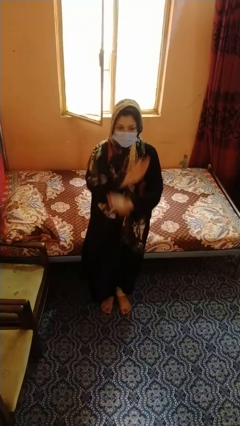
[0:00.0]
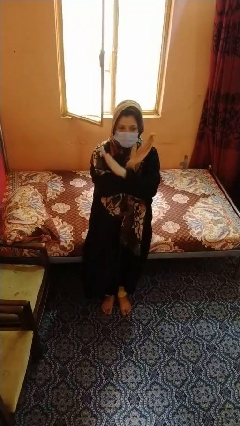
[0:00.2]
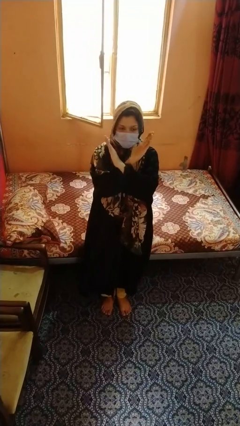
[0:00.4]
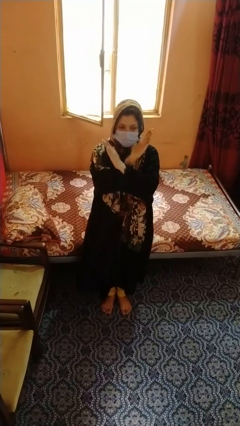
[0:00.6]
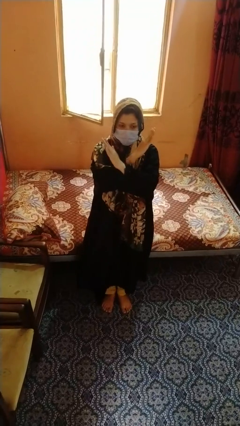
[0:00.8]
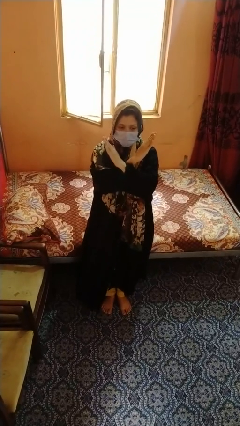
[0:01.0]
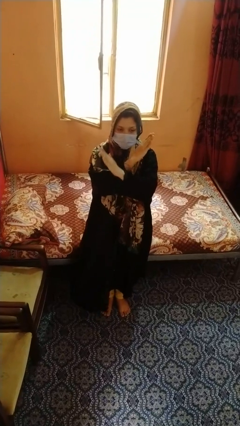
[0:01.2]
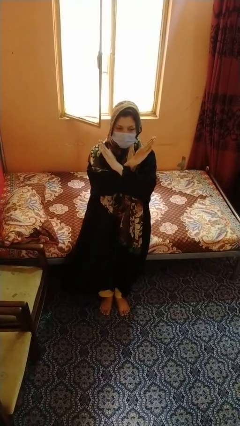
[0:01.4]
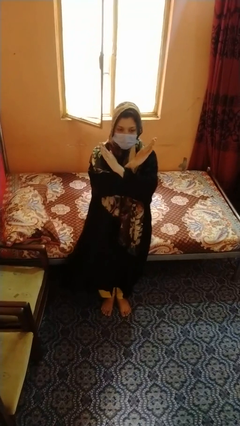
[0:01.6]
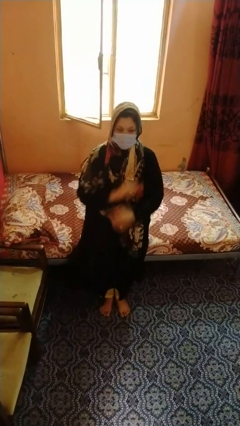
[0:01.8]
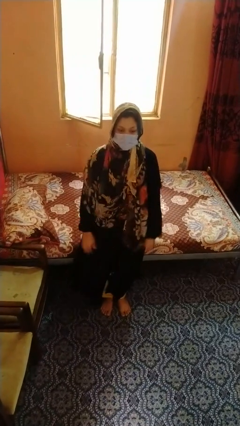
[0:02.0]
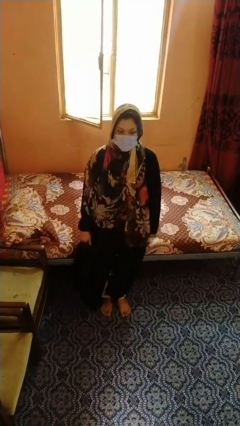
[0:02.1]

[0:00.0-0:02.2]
person gestures arms x

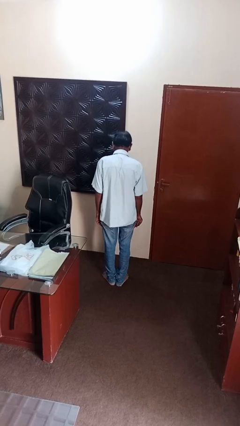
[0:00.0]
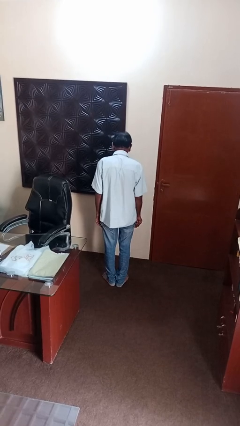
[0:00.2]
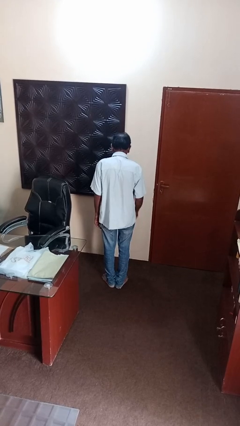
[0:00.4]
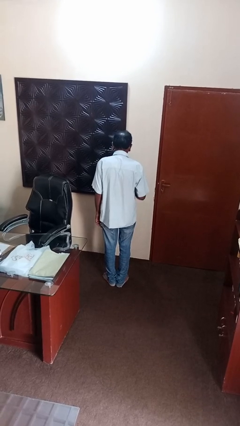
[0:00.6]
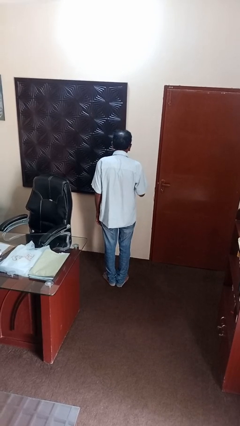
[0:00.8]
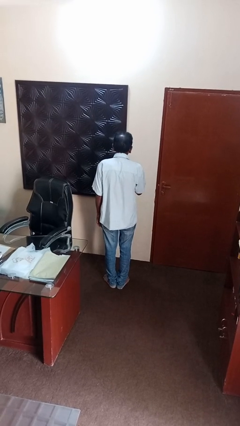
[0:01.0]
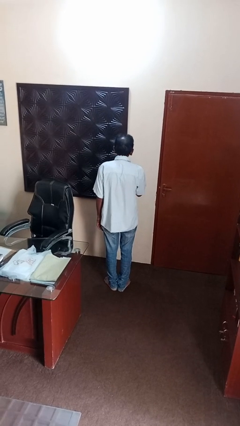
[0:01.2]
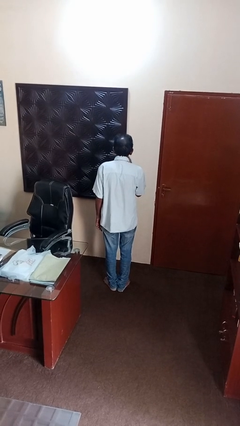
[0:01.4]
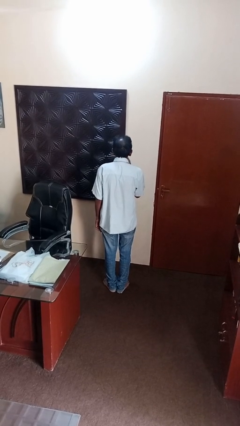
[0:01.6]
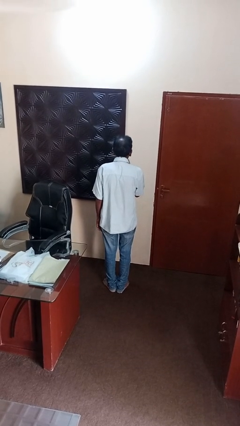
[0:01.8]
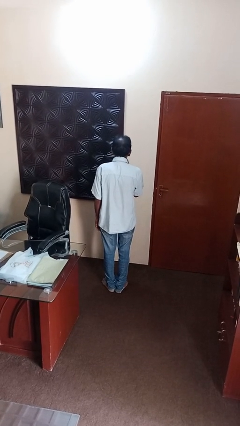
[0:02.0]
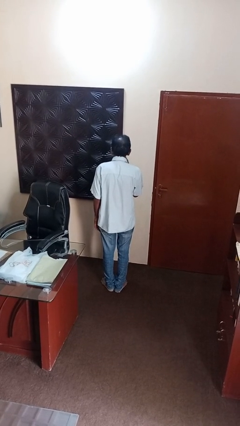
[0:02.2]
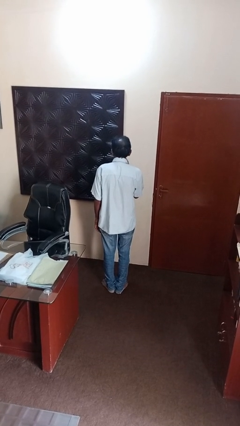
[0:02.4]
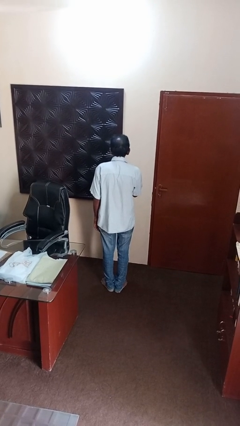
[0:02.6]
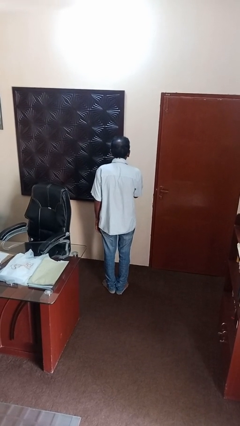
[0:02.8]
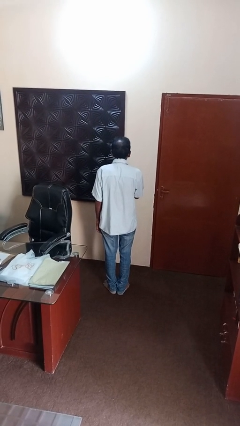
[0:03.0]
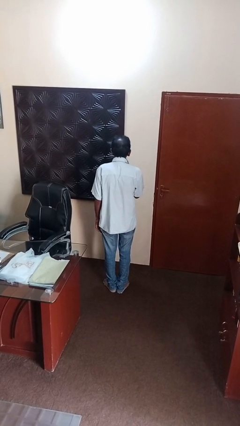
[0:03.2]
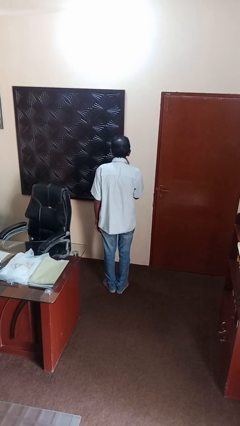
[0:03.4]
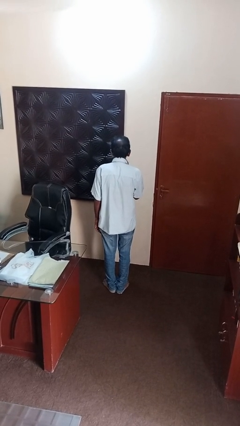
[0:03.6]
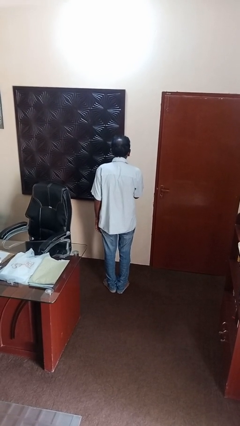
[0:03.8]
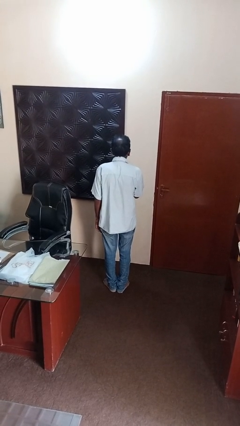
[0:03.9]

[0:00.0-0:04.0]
person applies lip makeup

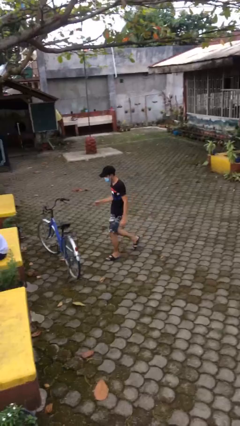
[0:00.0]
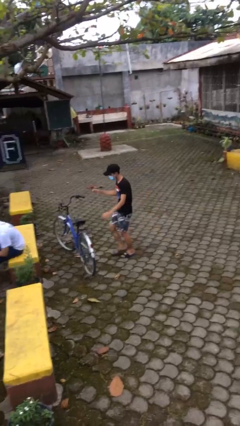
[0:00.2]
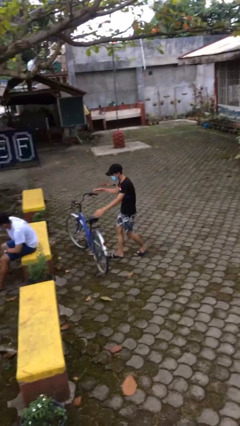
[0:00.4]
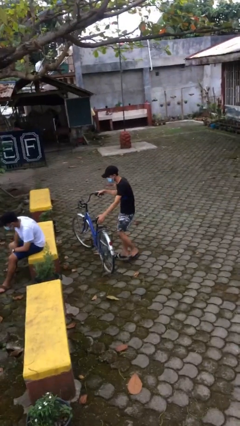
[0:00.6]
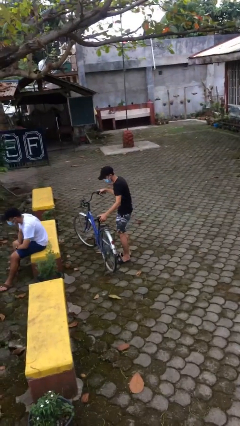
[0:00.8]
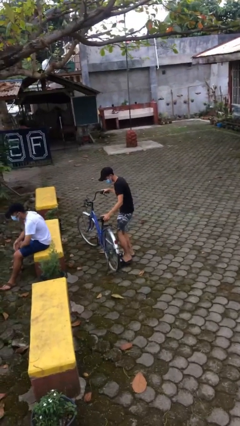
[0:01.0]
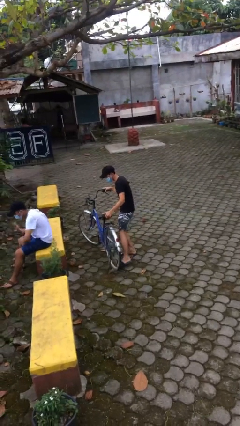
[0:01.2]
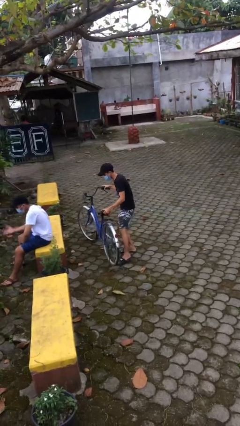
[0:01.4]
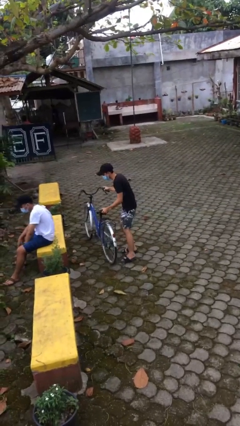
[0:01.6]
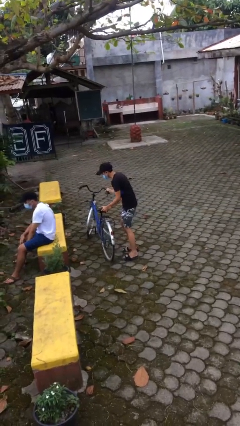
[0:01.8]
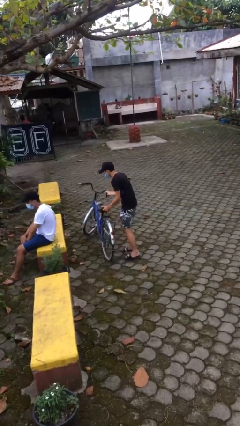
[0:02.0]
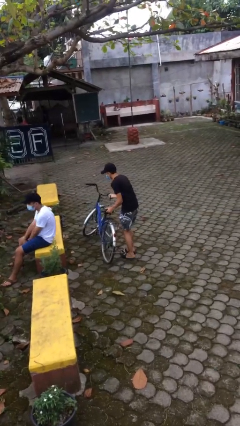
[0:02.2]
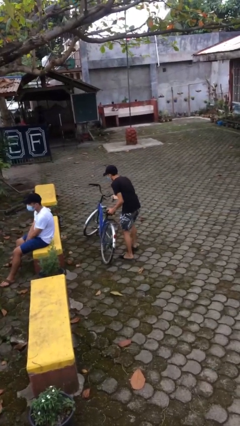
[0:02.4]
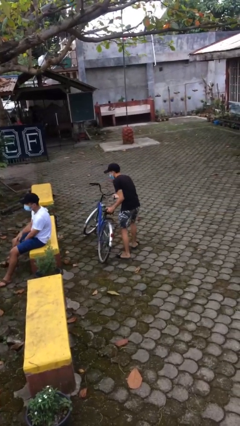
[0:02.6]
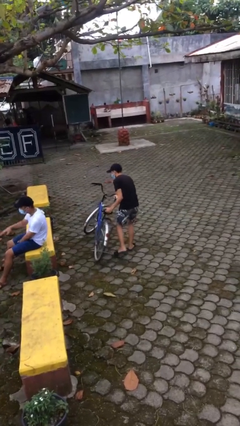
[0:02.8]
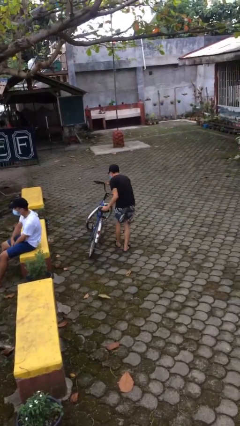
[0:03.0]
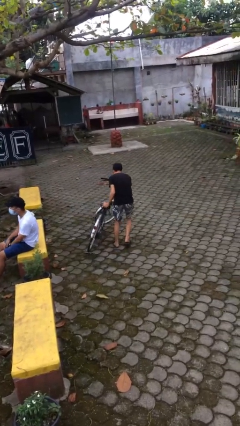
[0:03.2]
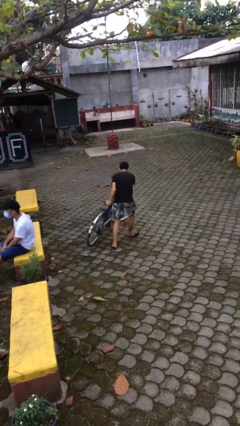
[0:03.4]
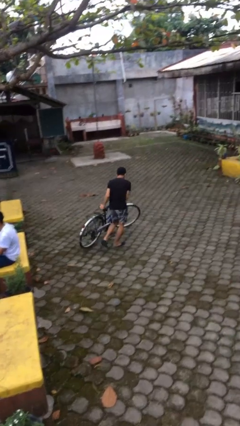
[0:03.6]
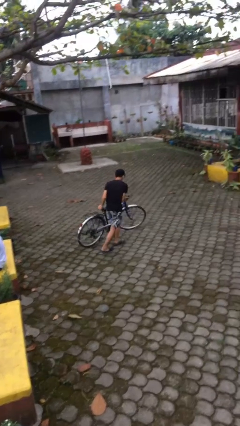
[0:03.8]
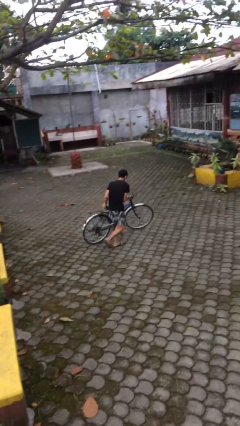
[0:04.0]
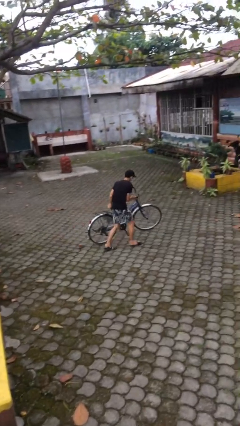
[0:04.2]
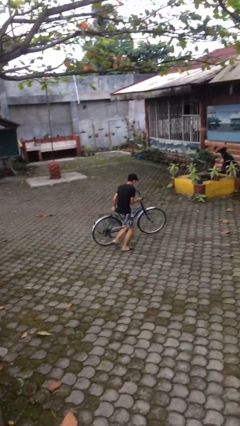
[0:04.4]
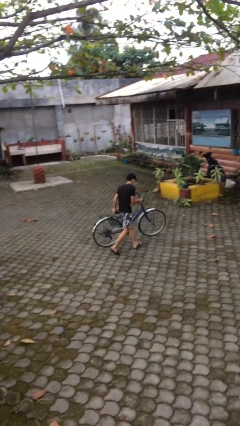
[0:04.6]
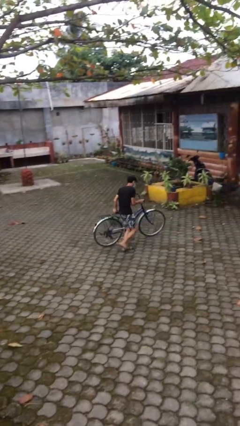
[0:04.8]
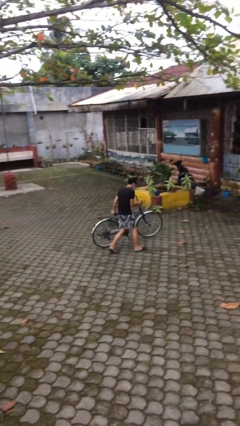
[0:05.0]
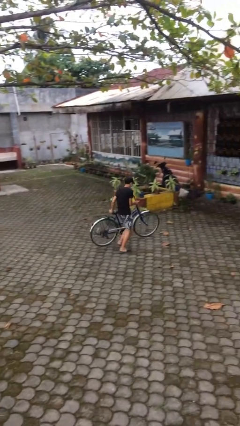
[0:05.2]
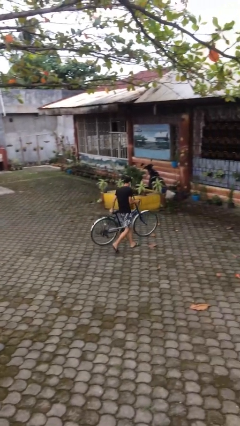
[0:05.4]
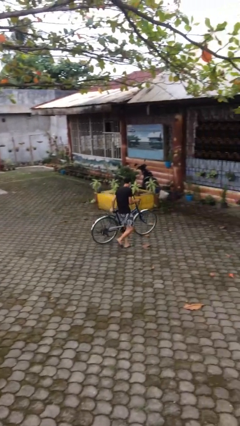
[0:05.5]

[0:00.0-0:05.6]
person steals object from person

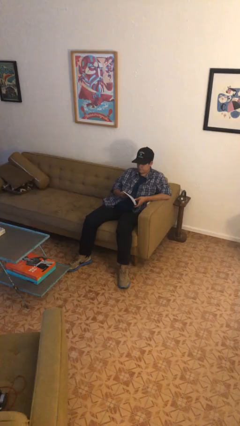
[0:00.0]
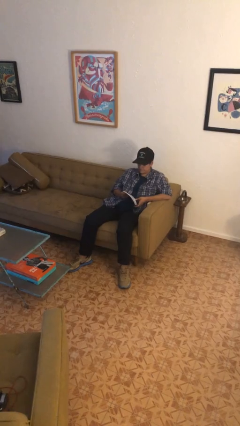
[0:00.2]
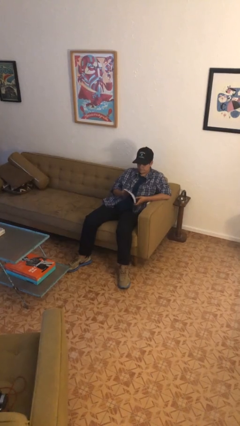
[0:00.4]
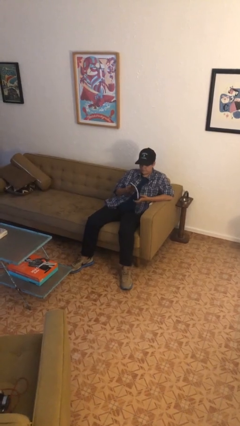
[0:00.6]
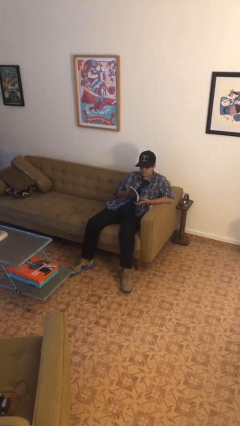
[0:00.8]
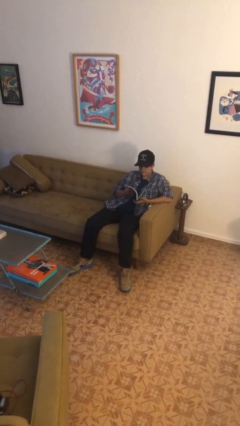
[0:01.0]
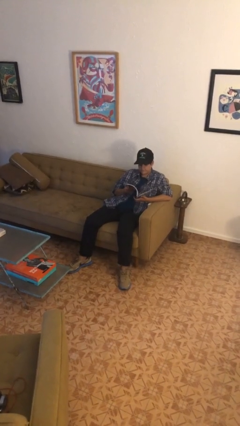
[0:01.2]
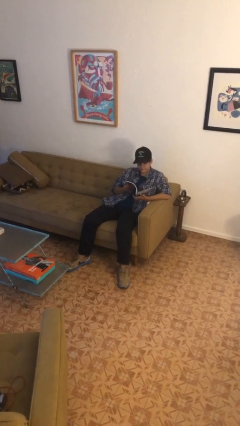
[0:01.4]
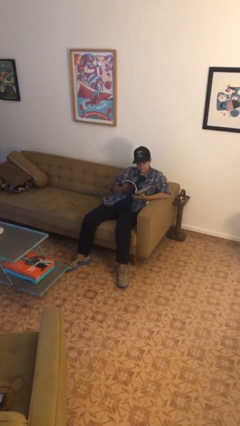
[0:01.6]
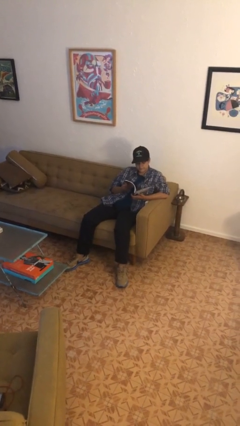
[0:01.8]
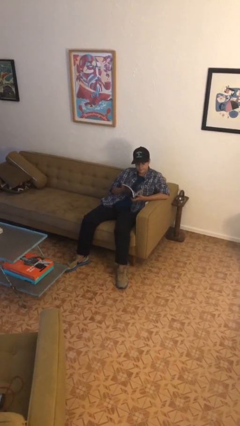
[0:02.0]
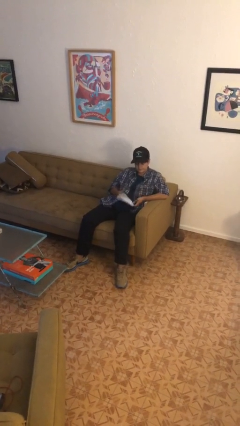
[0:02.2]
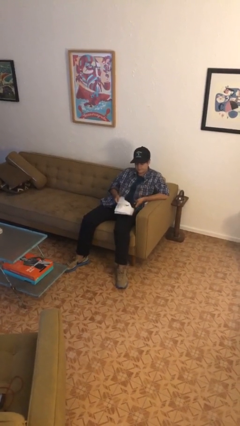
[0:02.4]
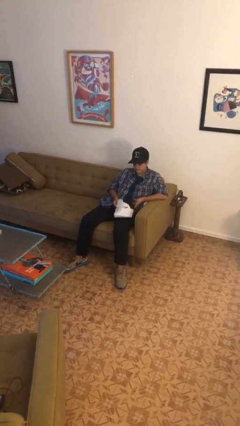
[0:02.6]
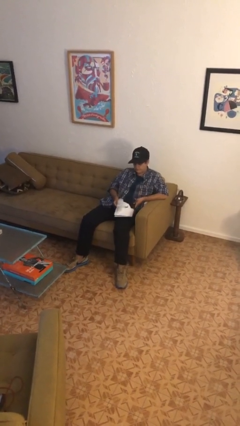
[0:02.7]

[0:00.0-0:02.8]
person reads magazine

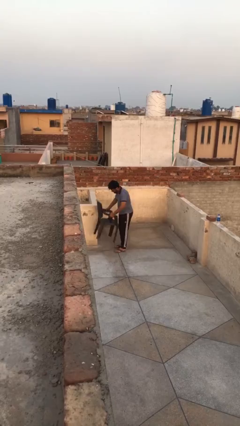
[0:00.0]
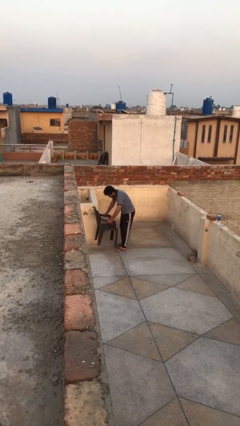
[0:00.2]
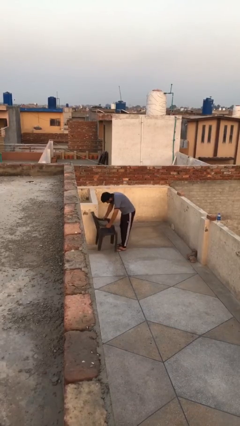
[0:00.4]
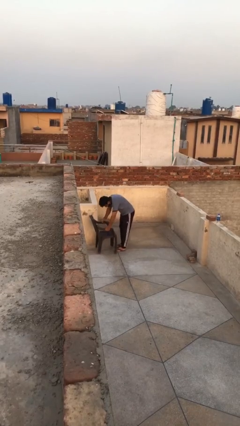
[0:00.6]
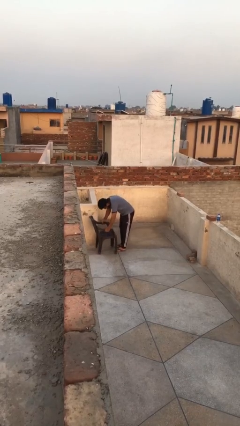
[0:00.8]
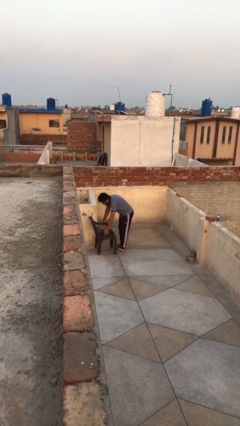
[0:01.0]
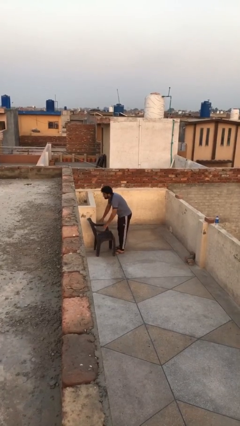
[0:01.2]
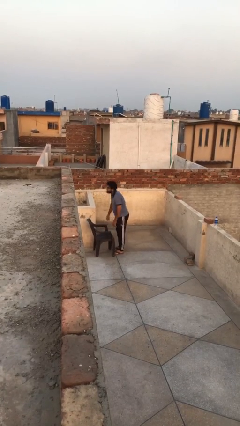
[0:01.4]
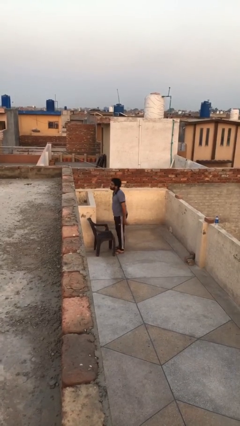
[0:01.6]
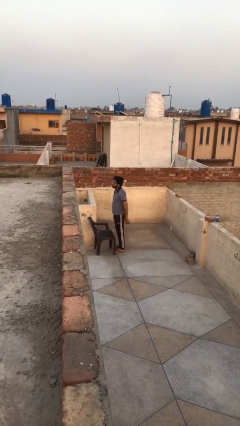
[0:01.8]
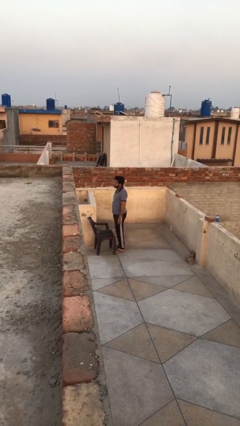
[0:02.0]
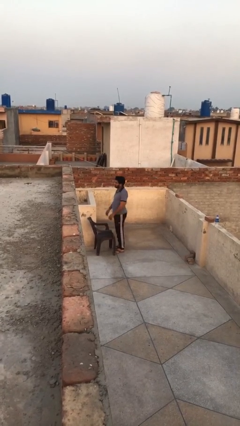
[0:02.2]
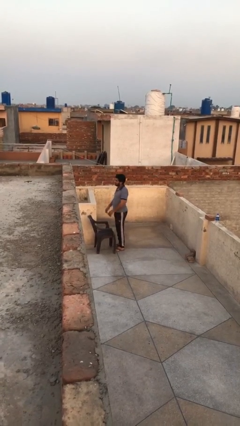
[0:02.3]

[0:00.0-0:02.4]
person puts down object on floor

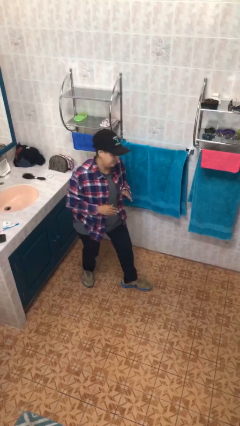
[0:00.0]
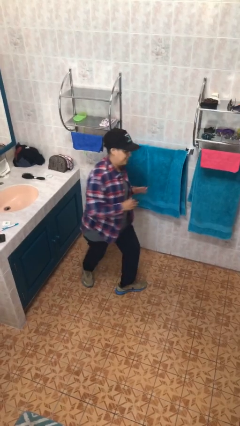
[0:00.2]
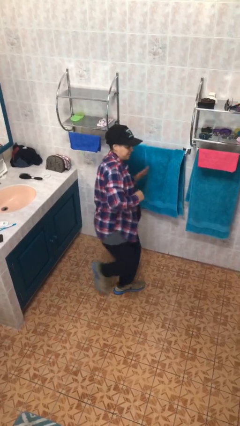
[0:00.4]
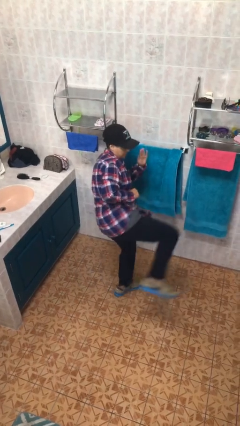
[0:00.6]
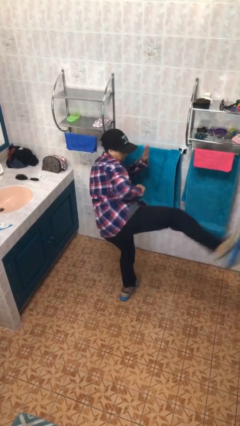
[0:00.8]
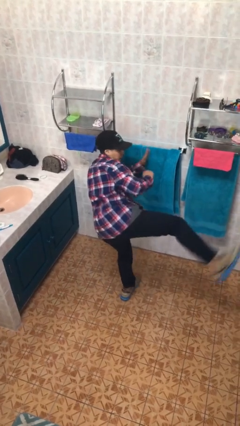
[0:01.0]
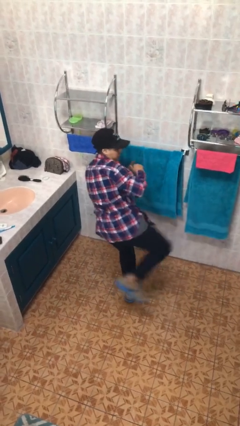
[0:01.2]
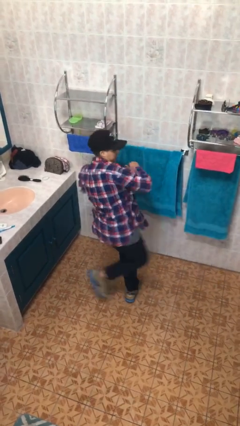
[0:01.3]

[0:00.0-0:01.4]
person karate kicks
